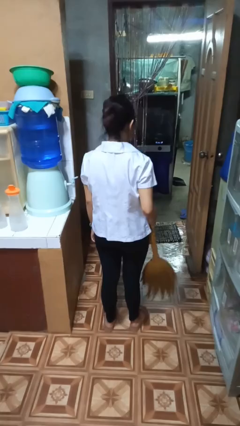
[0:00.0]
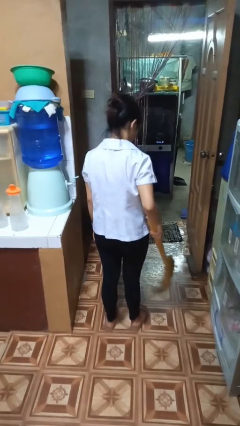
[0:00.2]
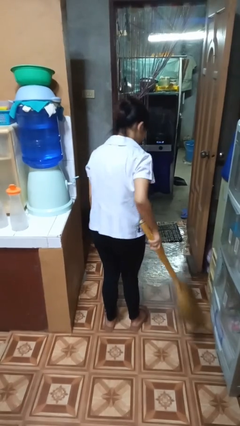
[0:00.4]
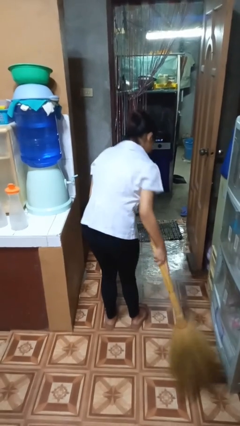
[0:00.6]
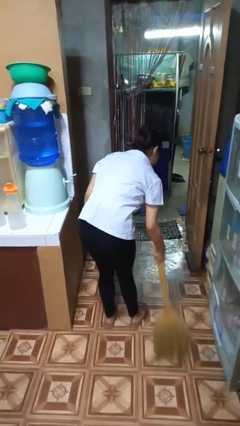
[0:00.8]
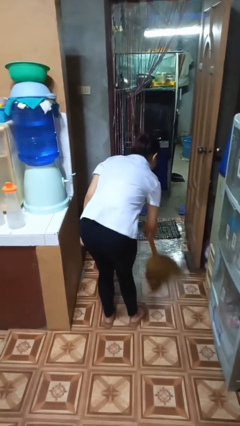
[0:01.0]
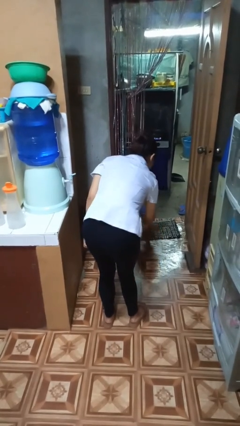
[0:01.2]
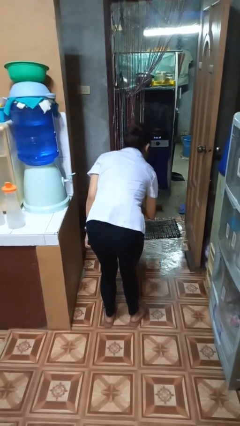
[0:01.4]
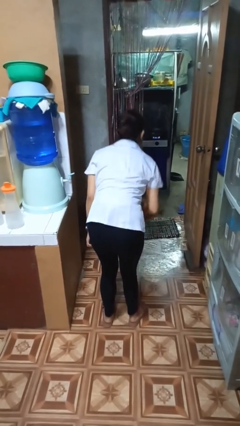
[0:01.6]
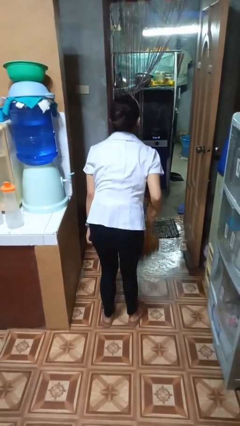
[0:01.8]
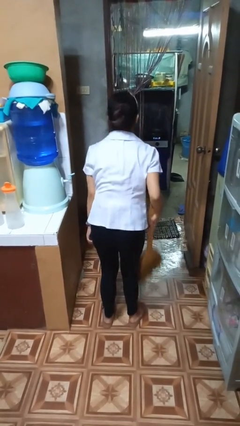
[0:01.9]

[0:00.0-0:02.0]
person sweeps floor

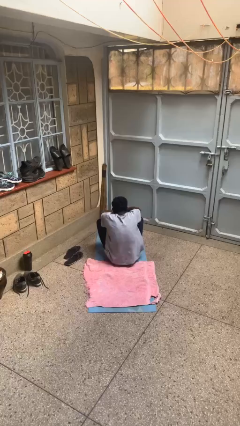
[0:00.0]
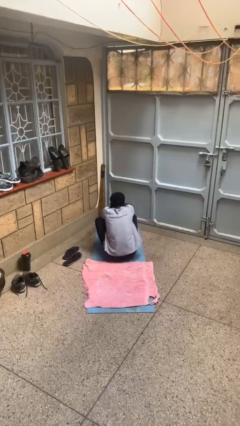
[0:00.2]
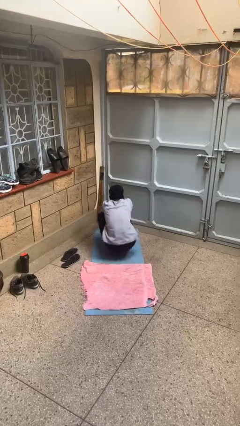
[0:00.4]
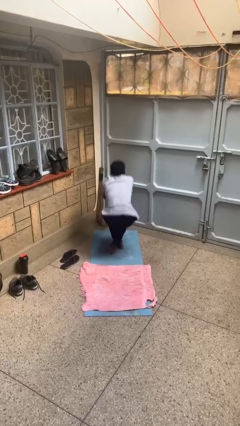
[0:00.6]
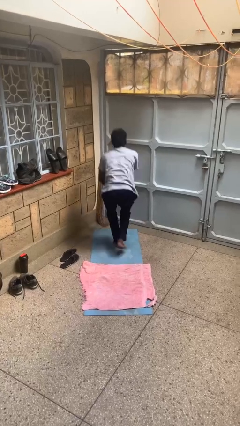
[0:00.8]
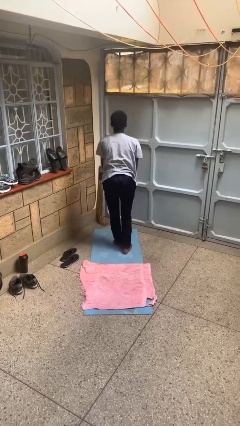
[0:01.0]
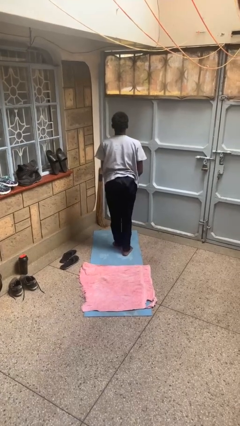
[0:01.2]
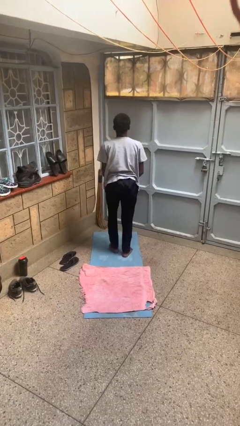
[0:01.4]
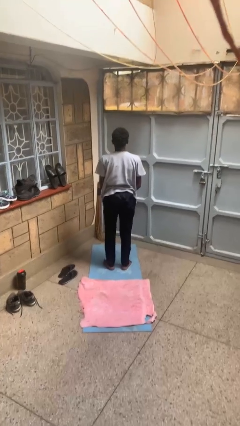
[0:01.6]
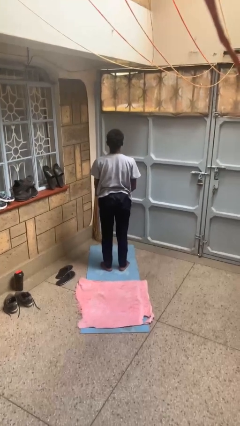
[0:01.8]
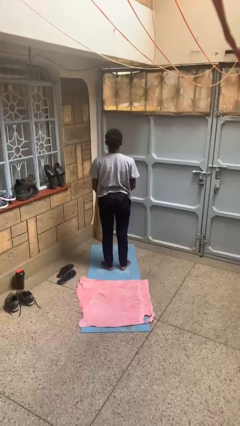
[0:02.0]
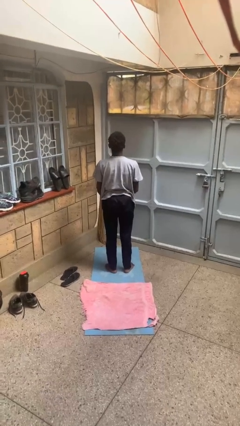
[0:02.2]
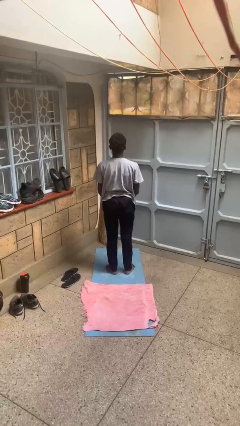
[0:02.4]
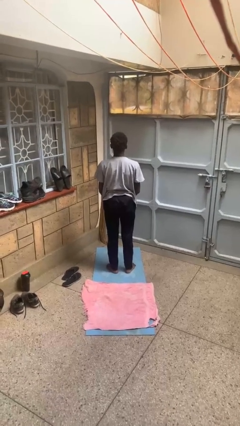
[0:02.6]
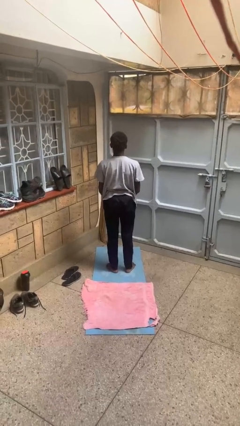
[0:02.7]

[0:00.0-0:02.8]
person stands up from floor

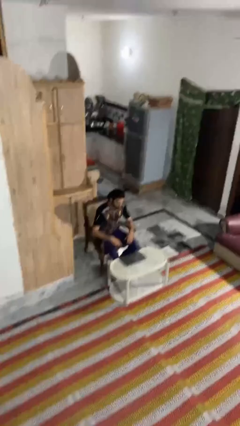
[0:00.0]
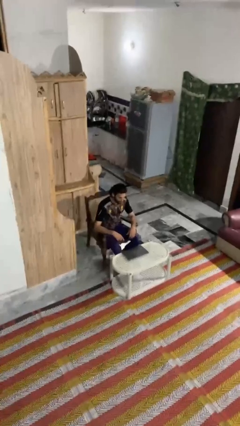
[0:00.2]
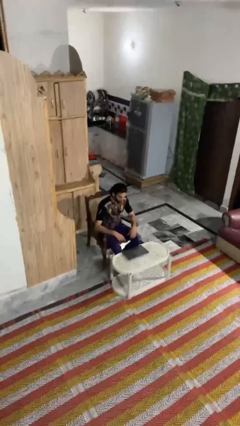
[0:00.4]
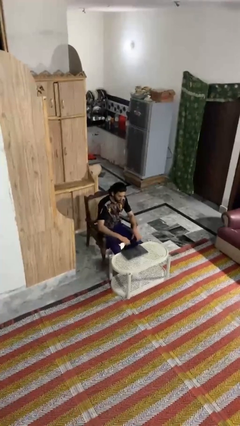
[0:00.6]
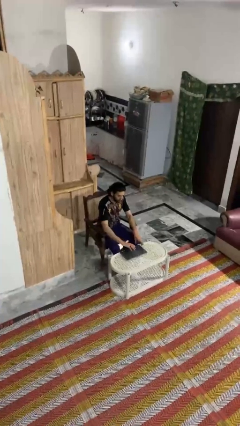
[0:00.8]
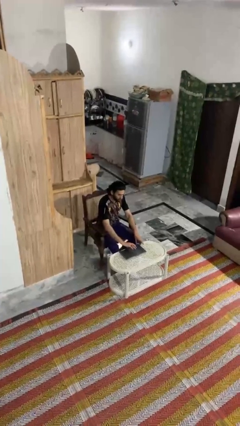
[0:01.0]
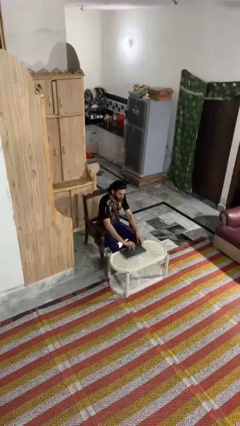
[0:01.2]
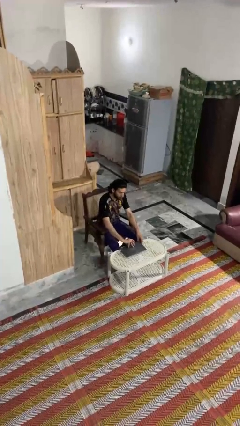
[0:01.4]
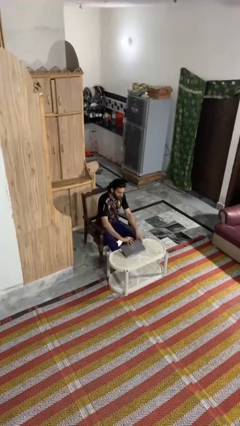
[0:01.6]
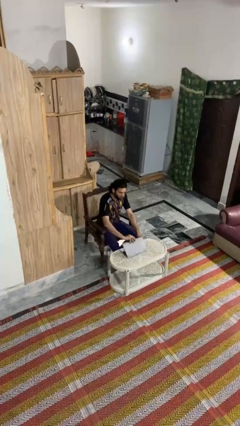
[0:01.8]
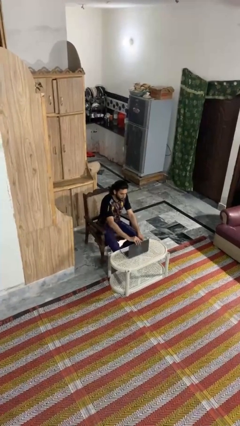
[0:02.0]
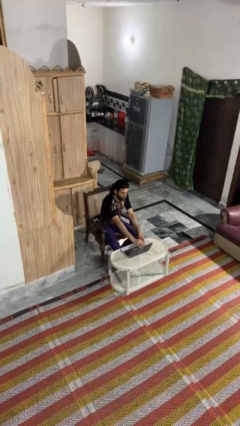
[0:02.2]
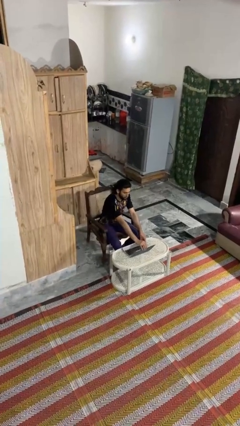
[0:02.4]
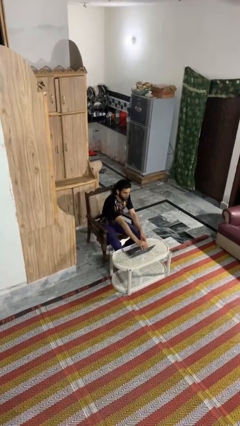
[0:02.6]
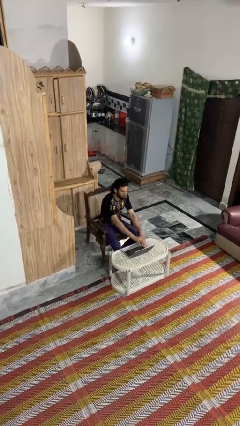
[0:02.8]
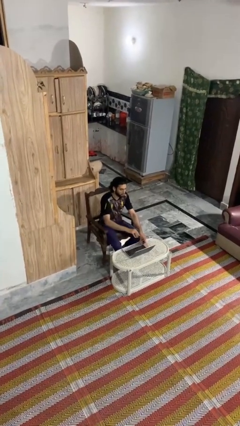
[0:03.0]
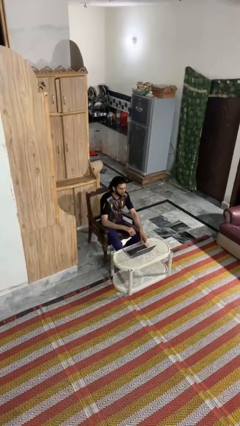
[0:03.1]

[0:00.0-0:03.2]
person opens laptop

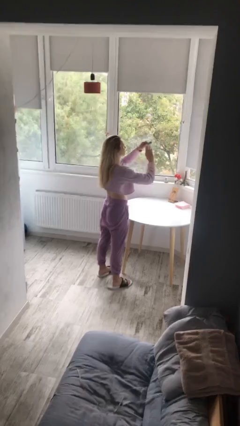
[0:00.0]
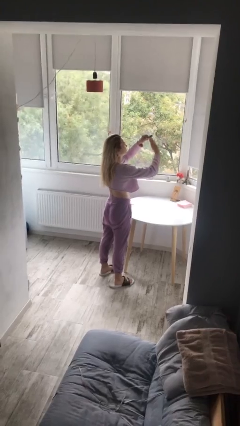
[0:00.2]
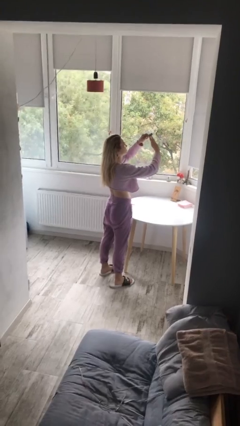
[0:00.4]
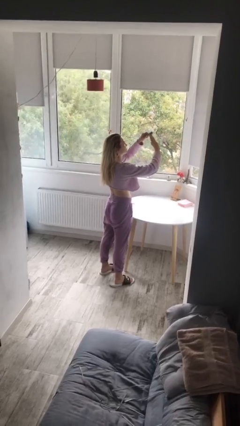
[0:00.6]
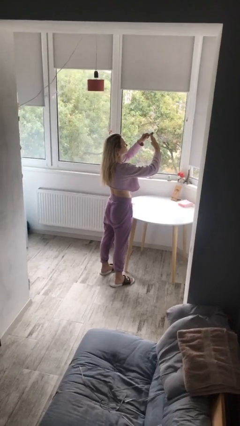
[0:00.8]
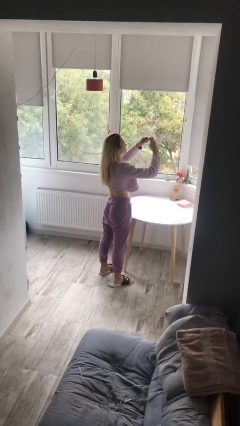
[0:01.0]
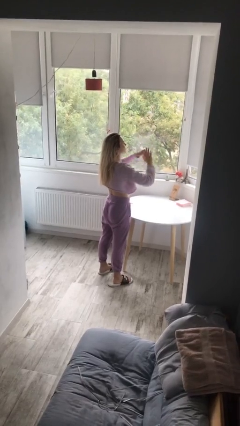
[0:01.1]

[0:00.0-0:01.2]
person files fingernails

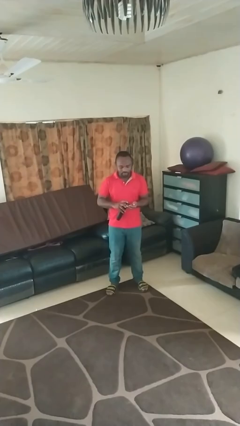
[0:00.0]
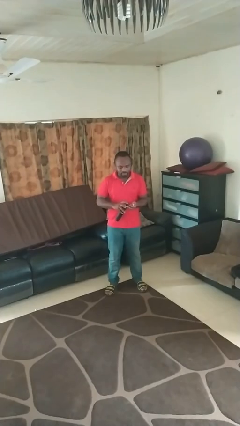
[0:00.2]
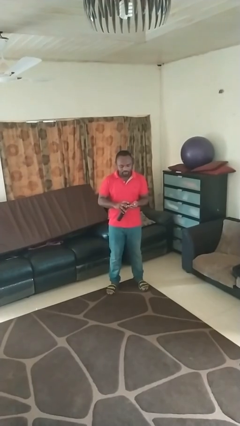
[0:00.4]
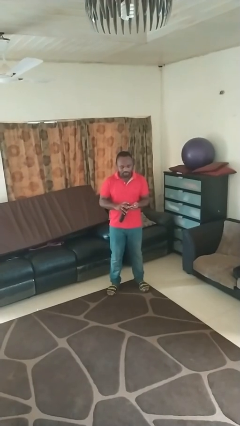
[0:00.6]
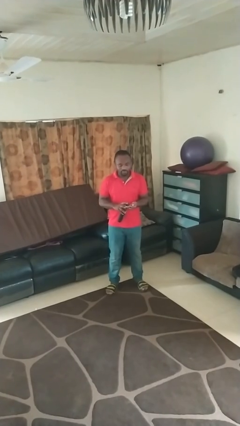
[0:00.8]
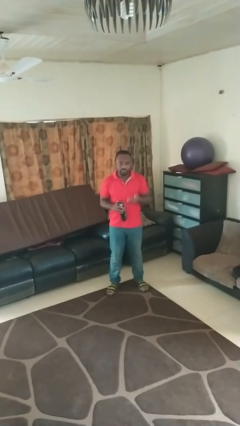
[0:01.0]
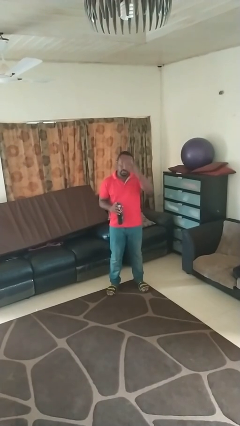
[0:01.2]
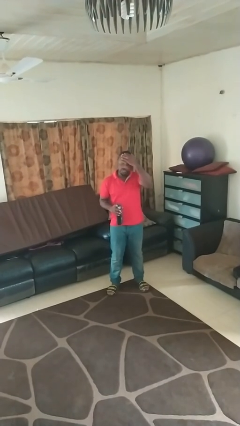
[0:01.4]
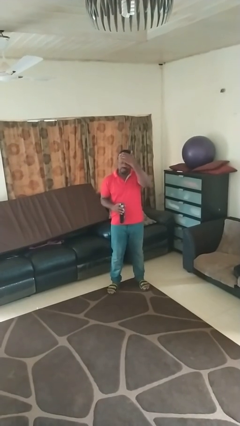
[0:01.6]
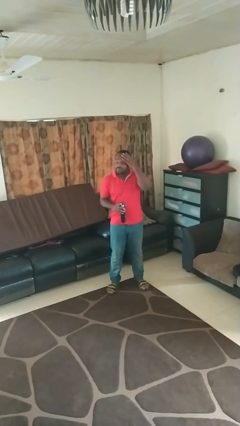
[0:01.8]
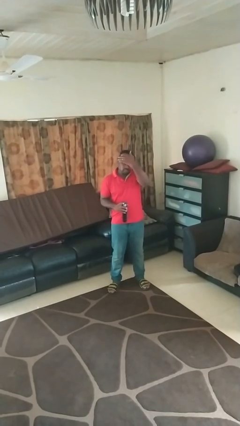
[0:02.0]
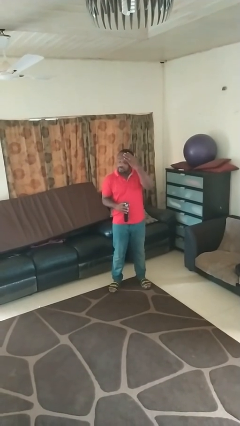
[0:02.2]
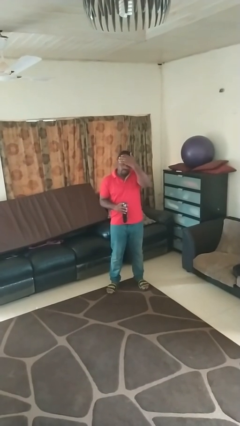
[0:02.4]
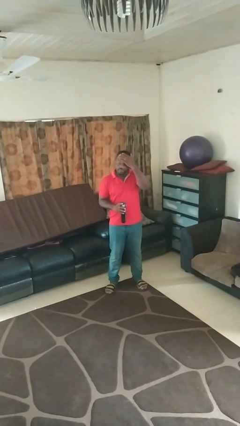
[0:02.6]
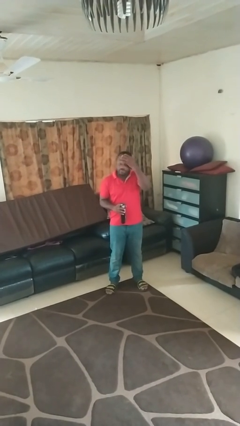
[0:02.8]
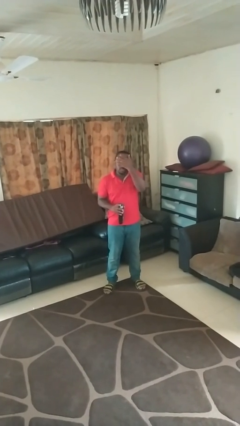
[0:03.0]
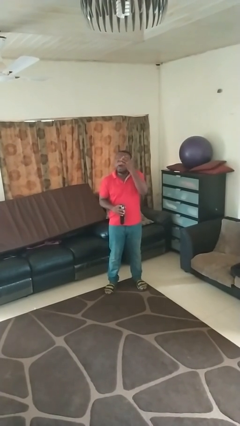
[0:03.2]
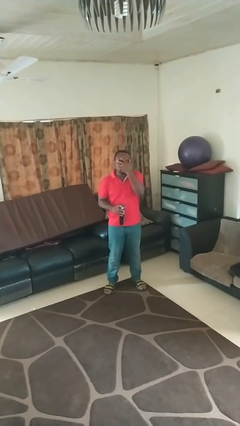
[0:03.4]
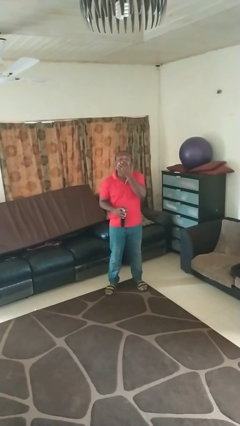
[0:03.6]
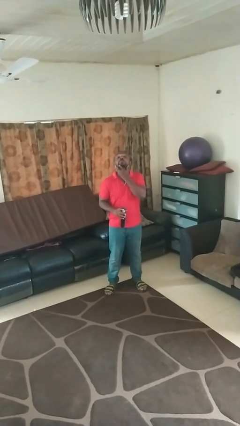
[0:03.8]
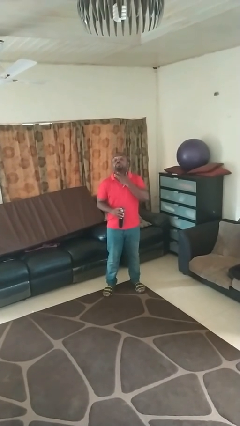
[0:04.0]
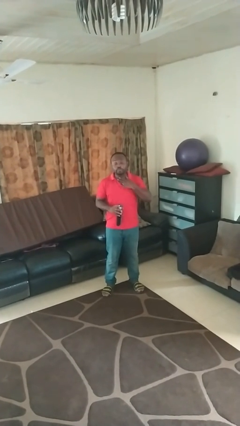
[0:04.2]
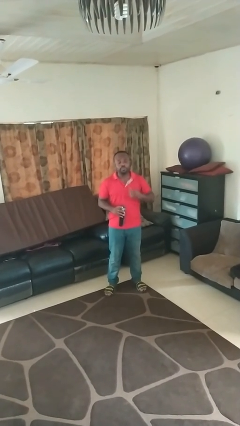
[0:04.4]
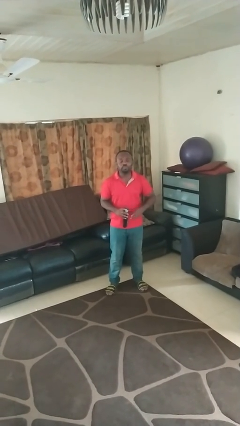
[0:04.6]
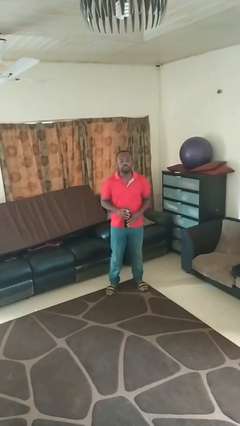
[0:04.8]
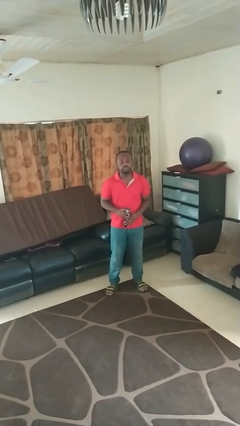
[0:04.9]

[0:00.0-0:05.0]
person applies facial moisturizer

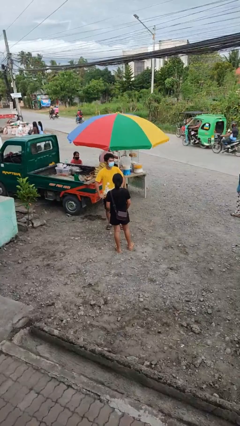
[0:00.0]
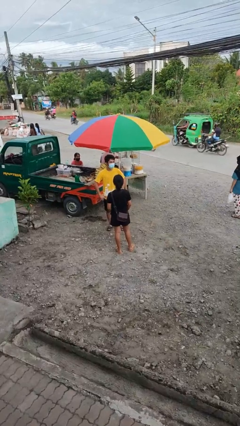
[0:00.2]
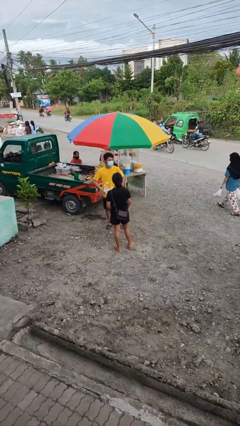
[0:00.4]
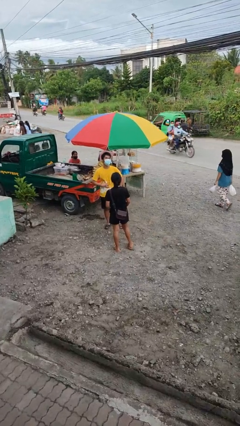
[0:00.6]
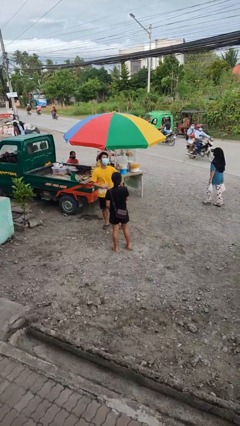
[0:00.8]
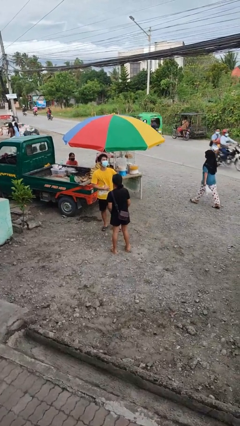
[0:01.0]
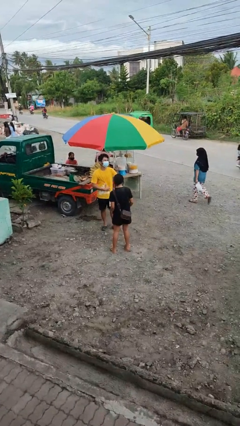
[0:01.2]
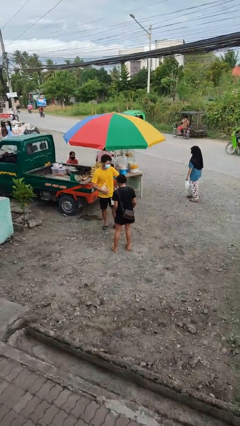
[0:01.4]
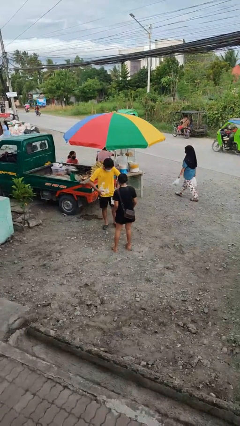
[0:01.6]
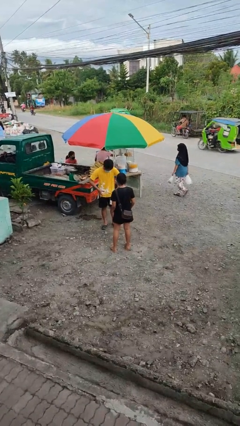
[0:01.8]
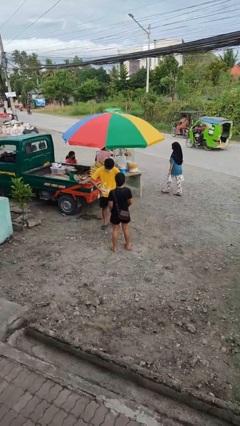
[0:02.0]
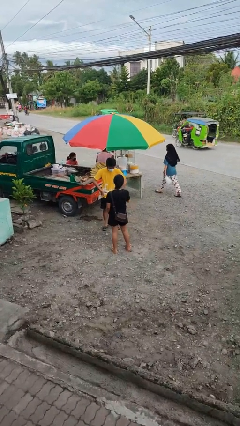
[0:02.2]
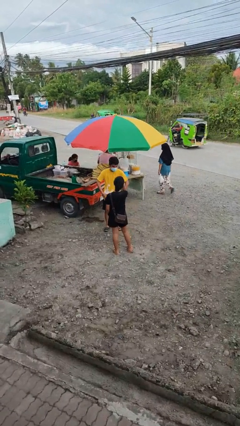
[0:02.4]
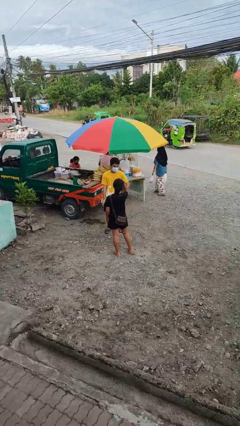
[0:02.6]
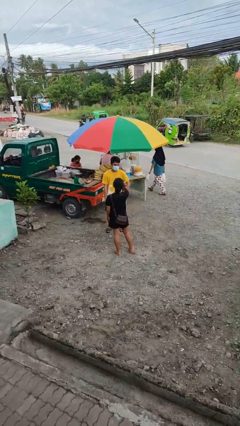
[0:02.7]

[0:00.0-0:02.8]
person laughs with person
